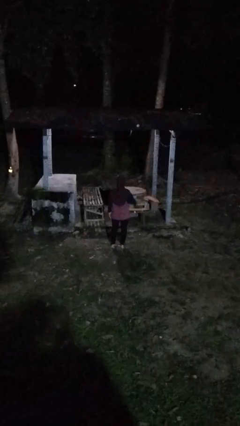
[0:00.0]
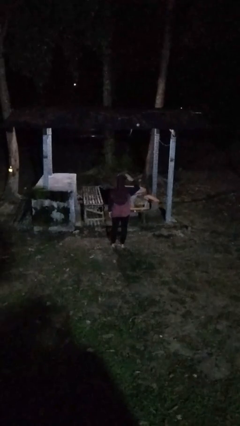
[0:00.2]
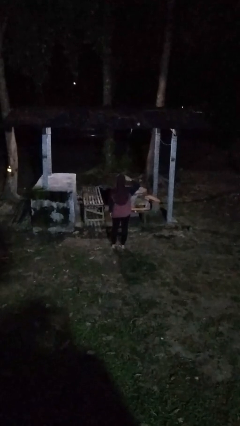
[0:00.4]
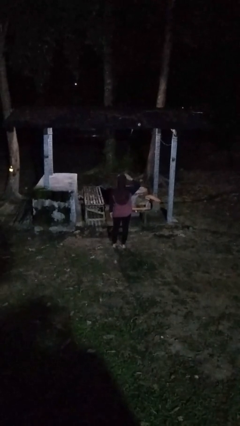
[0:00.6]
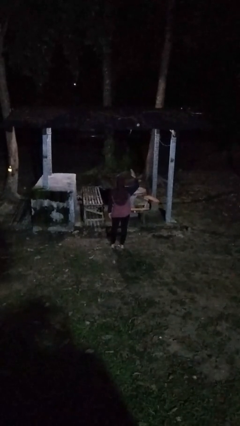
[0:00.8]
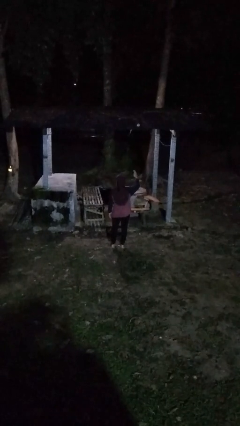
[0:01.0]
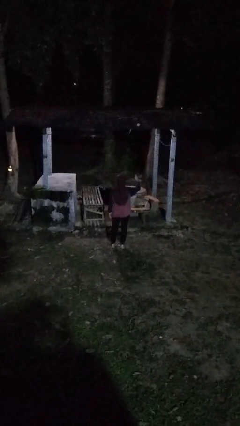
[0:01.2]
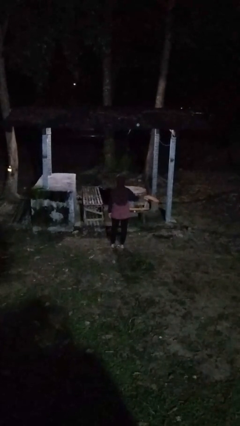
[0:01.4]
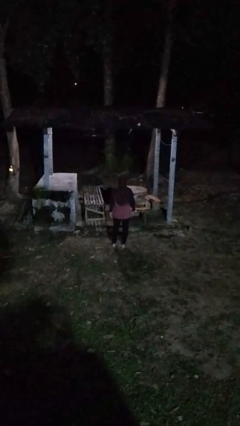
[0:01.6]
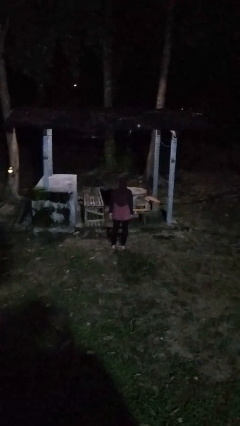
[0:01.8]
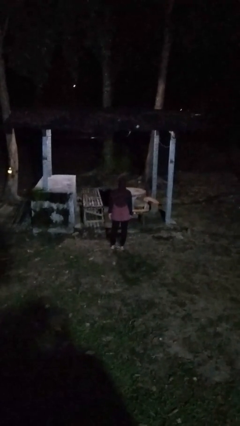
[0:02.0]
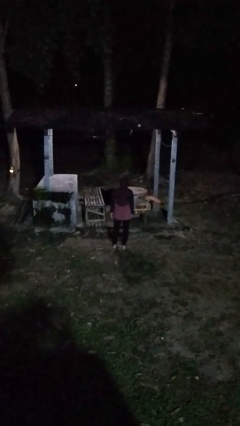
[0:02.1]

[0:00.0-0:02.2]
person salutes

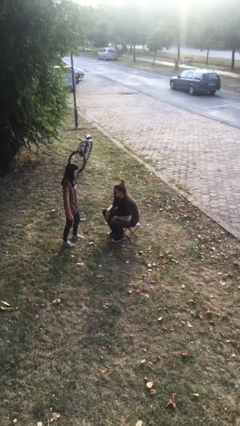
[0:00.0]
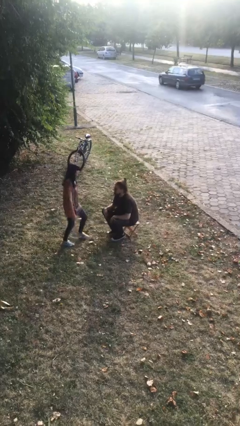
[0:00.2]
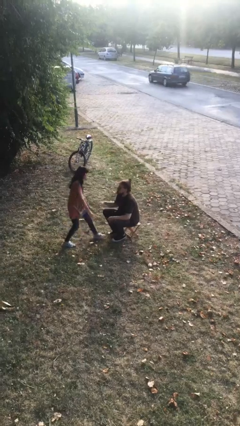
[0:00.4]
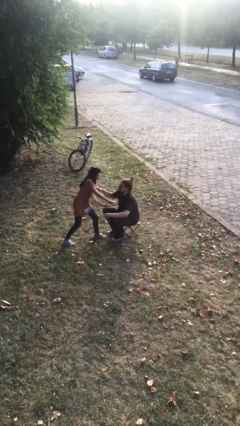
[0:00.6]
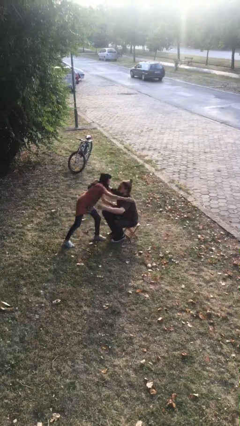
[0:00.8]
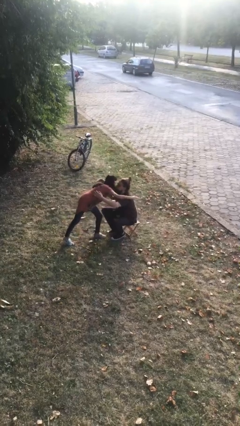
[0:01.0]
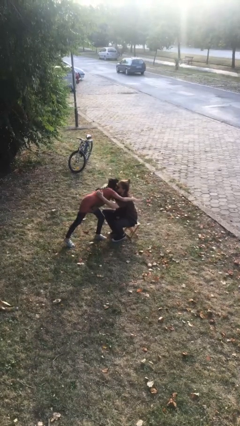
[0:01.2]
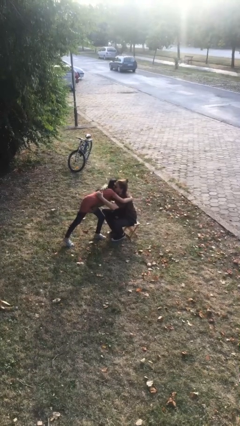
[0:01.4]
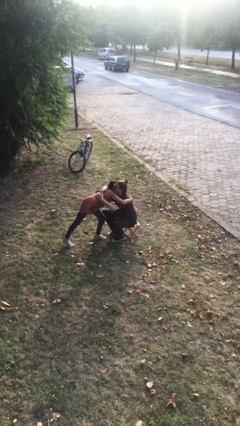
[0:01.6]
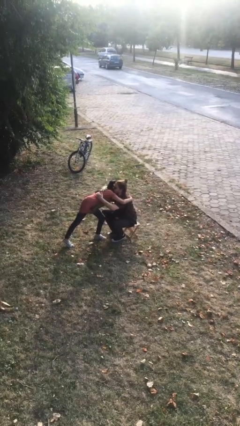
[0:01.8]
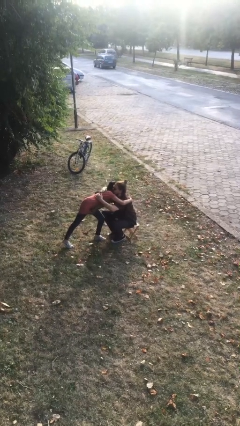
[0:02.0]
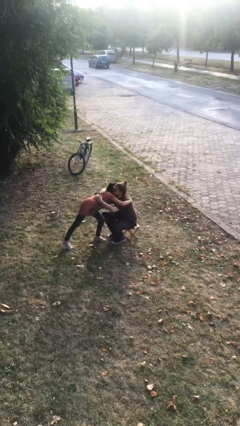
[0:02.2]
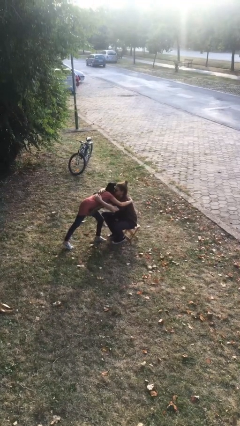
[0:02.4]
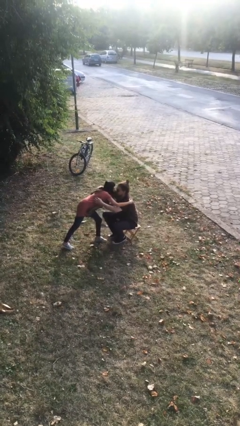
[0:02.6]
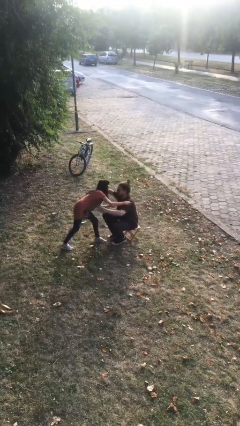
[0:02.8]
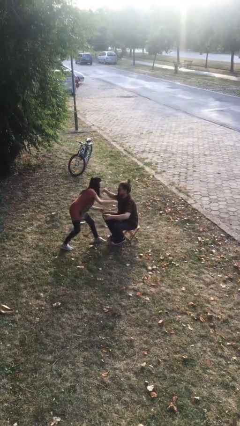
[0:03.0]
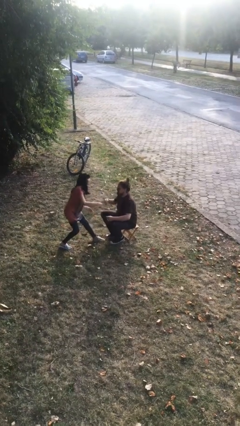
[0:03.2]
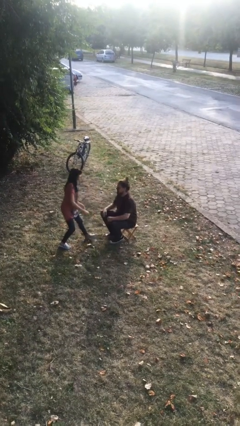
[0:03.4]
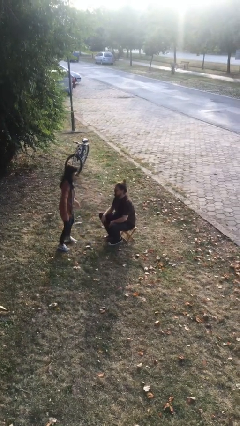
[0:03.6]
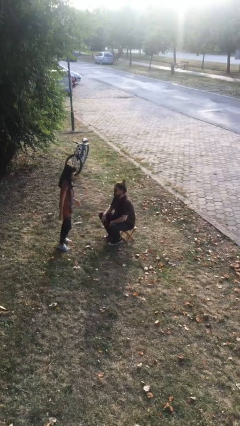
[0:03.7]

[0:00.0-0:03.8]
person embraces person

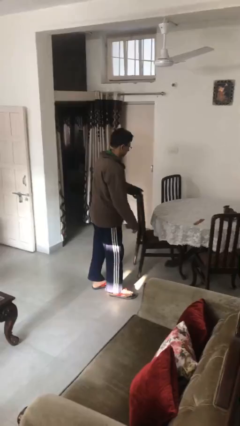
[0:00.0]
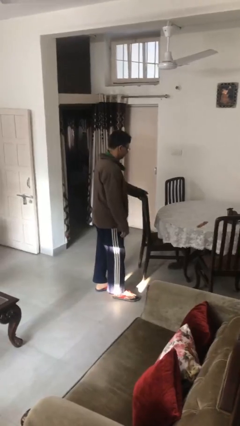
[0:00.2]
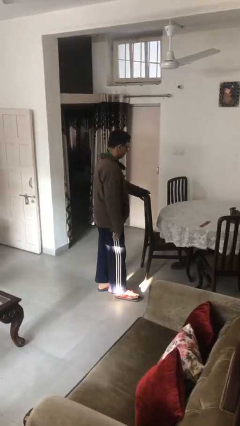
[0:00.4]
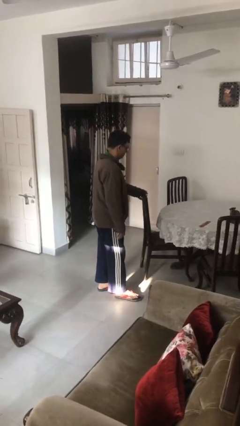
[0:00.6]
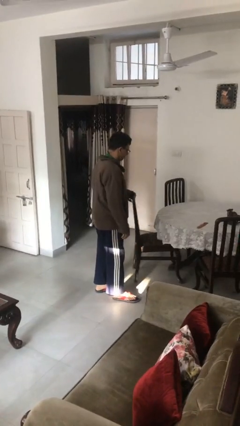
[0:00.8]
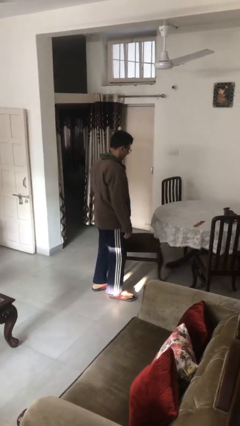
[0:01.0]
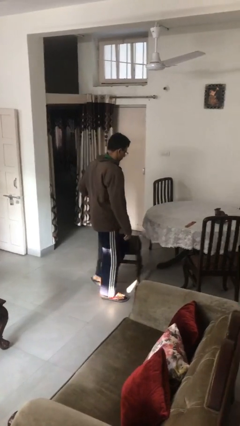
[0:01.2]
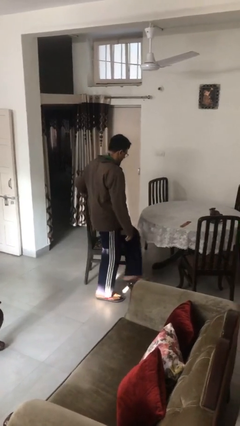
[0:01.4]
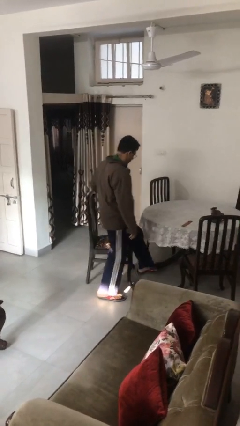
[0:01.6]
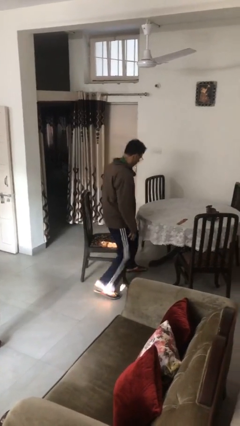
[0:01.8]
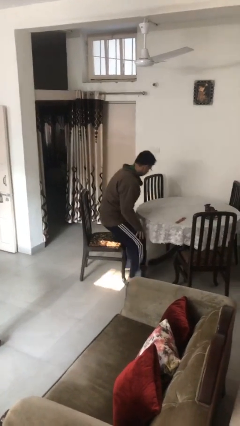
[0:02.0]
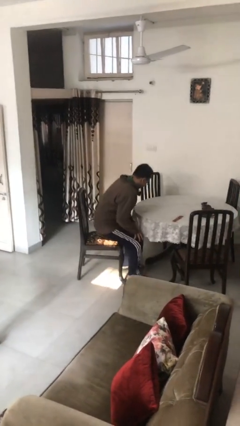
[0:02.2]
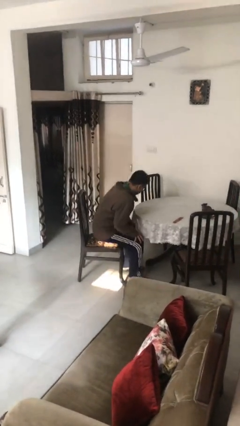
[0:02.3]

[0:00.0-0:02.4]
person sits down

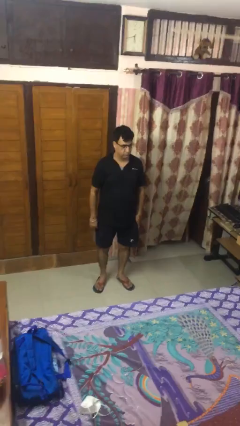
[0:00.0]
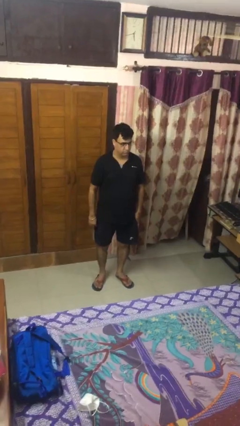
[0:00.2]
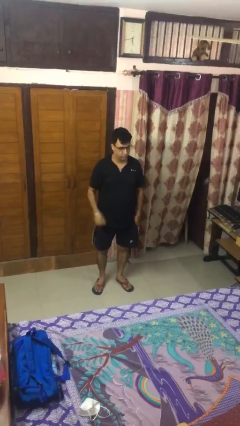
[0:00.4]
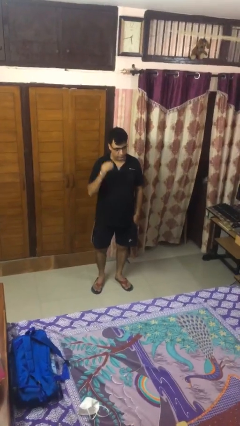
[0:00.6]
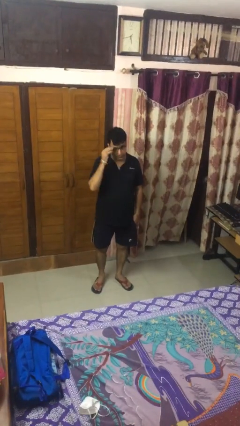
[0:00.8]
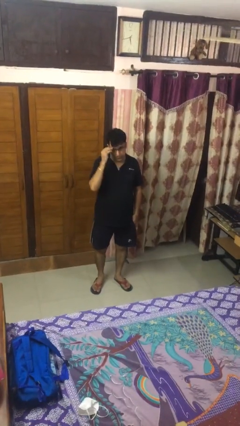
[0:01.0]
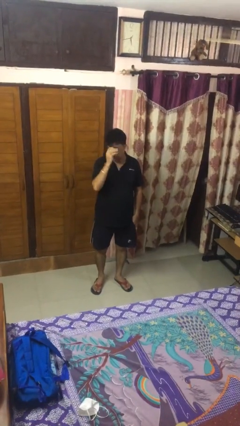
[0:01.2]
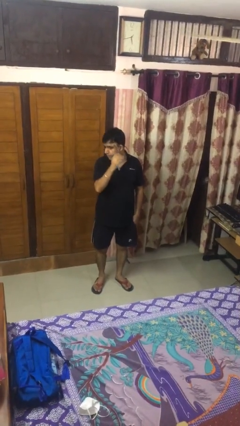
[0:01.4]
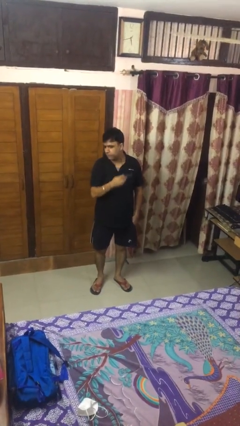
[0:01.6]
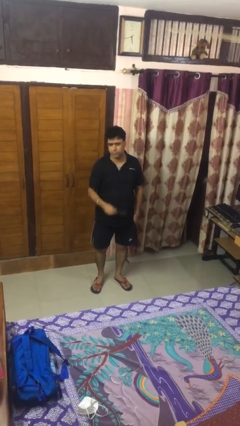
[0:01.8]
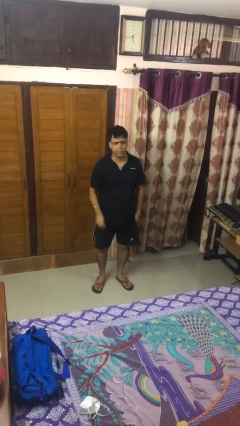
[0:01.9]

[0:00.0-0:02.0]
person takes off glasses

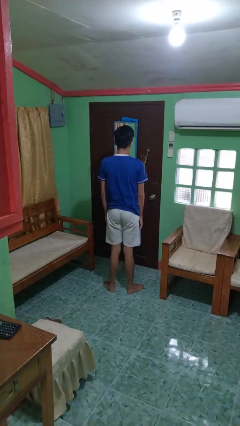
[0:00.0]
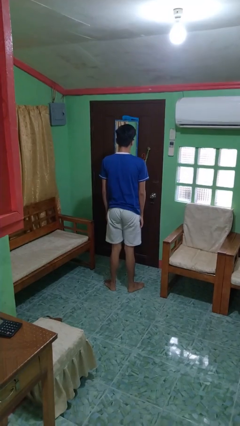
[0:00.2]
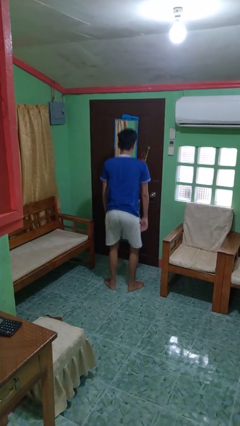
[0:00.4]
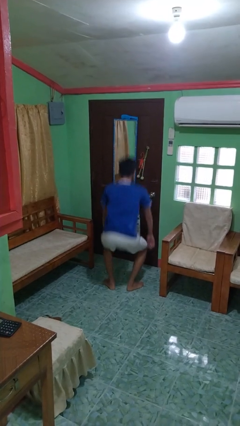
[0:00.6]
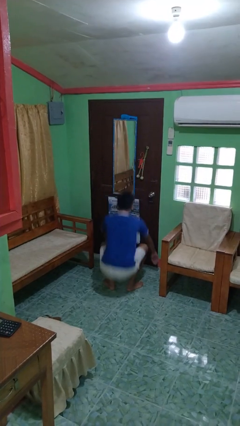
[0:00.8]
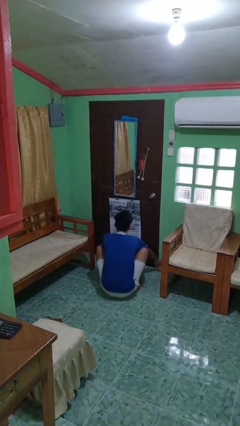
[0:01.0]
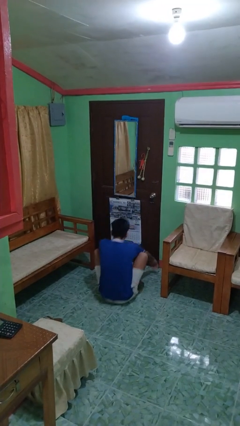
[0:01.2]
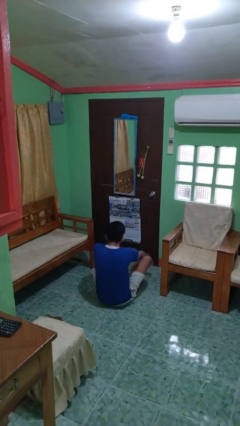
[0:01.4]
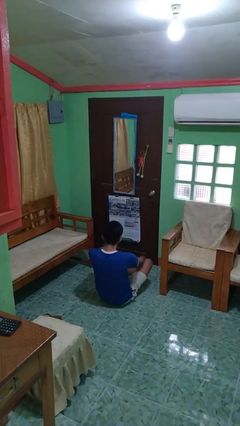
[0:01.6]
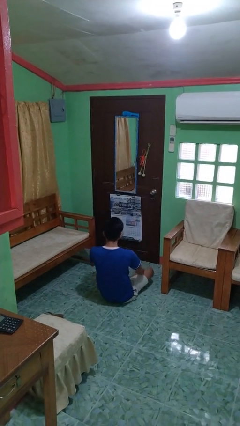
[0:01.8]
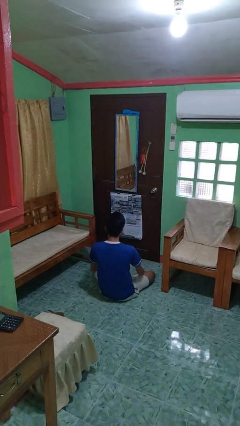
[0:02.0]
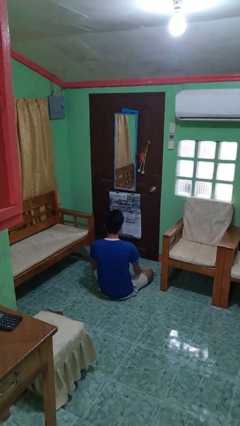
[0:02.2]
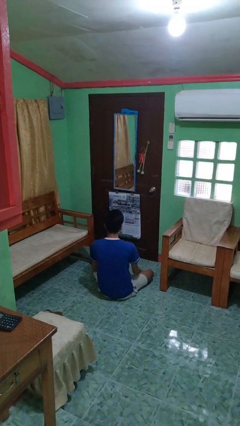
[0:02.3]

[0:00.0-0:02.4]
person sits crisscross

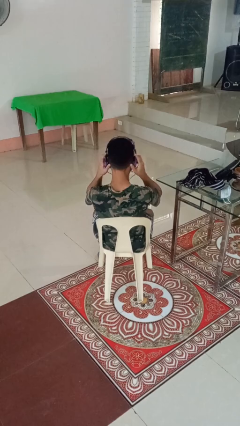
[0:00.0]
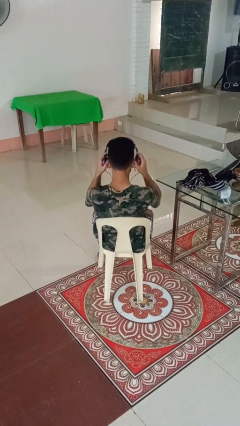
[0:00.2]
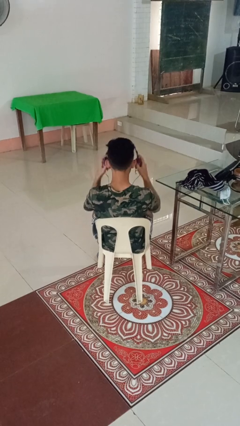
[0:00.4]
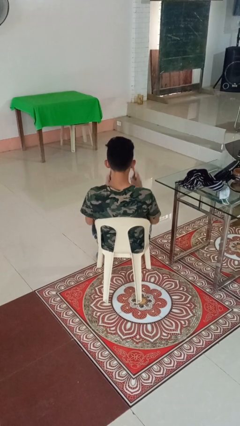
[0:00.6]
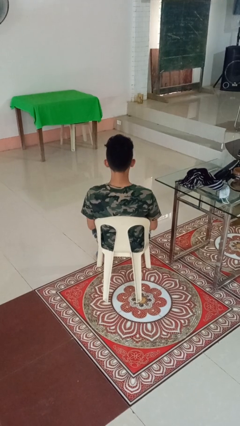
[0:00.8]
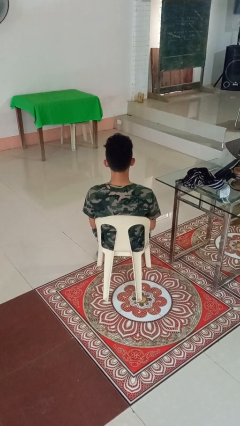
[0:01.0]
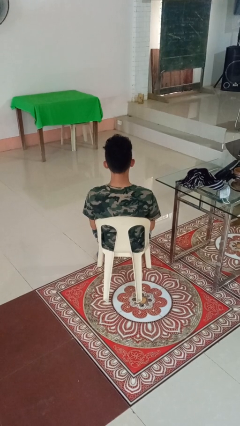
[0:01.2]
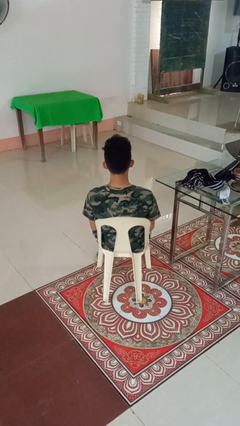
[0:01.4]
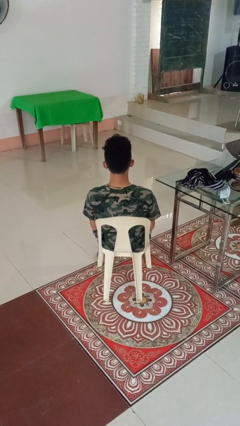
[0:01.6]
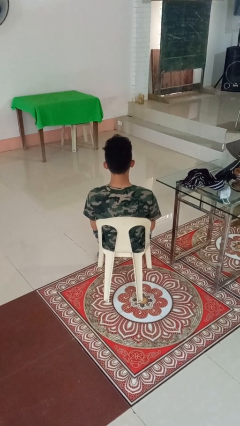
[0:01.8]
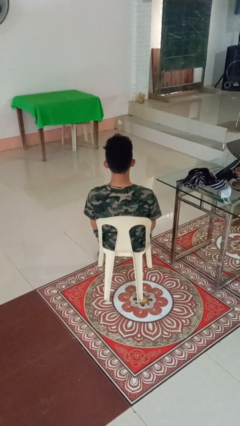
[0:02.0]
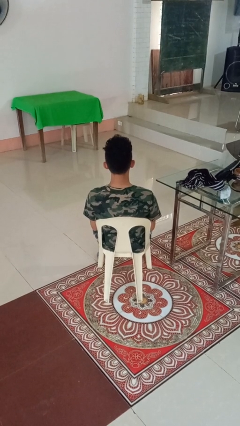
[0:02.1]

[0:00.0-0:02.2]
person takes off headphones

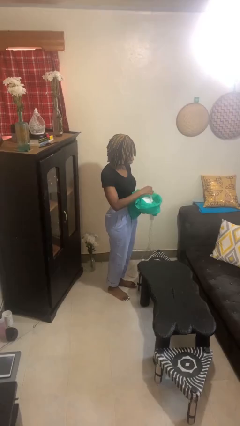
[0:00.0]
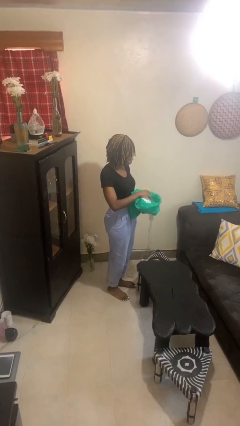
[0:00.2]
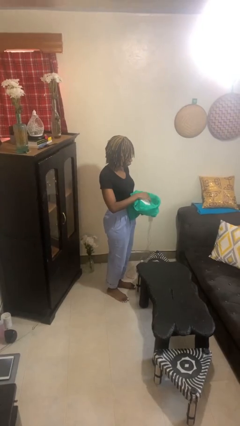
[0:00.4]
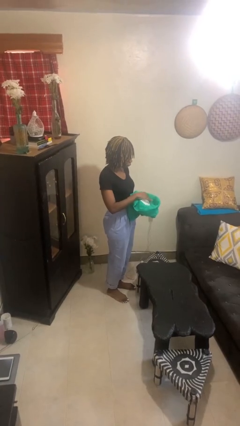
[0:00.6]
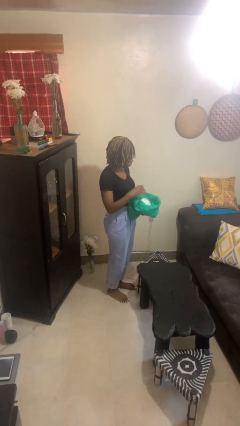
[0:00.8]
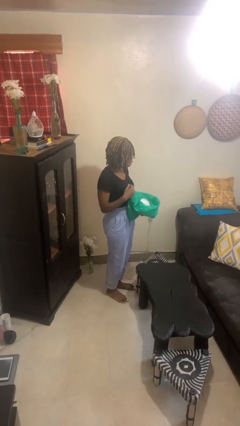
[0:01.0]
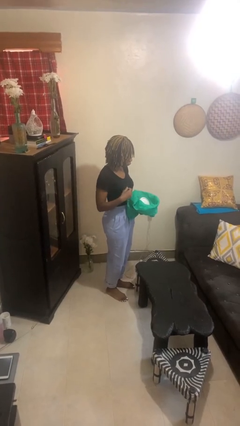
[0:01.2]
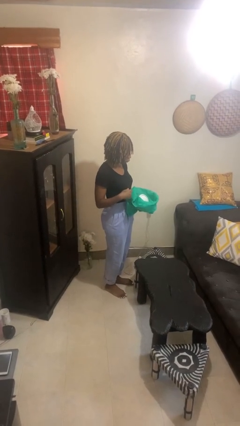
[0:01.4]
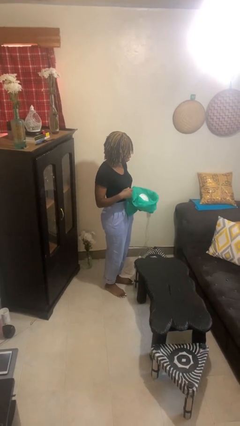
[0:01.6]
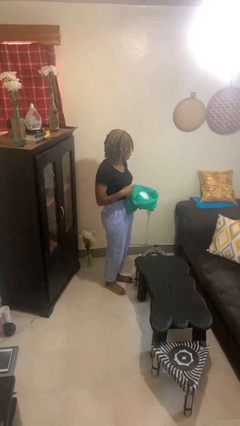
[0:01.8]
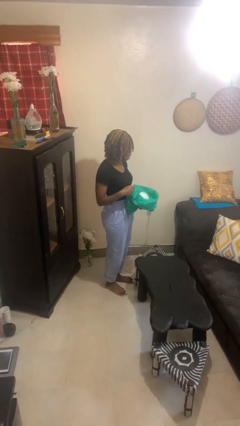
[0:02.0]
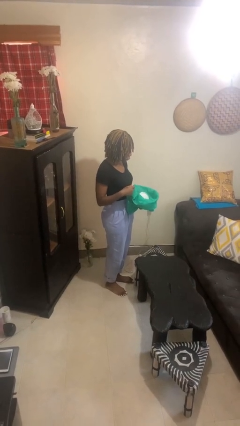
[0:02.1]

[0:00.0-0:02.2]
person puts object into bag
